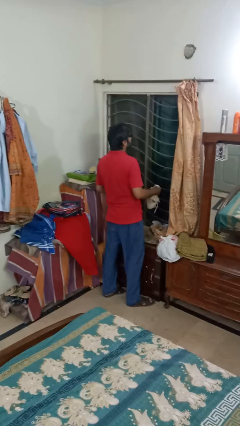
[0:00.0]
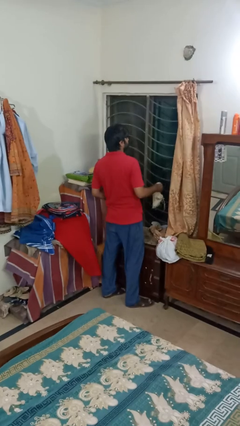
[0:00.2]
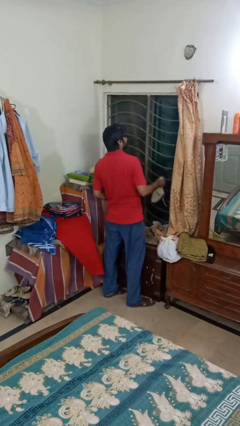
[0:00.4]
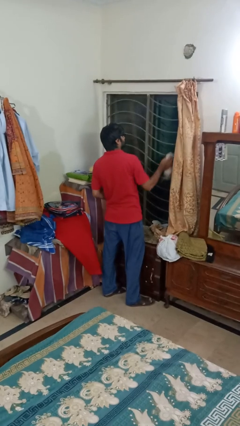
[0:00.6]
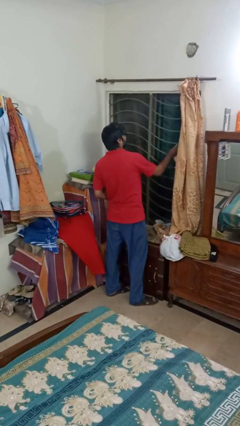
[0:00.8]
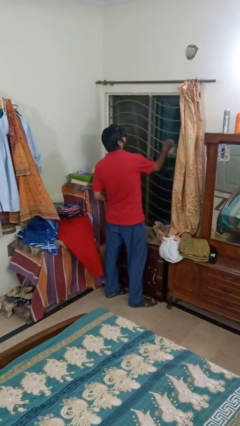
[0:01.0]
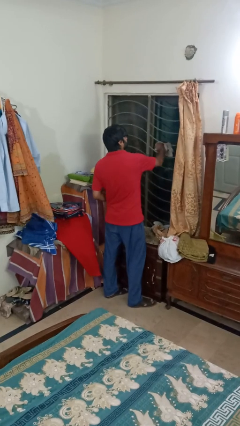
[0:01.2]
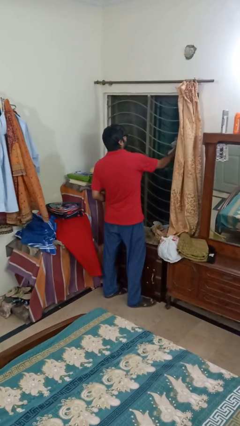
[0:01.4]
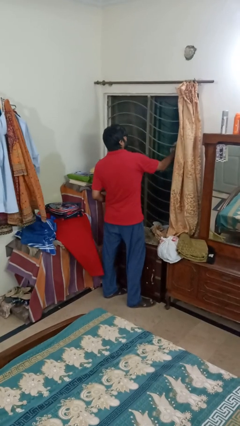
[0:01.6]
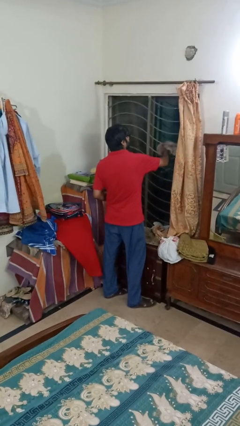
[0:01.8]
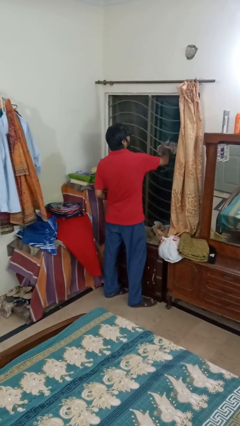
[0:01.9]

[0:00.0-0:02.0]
person washes window

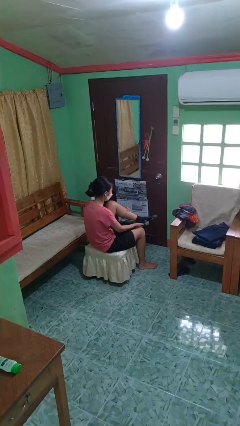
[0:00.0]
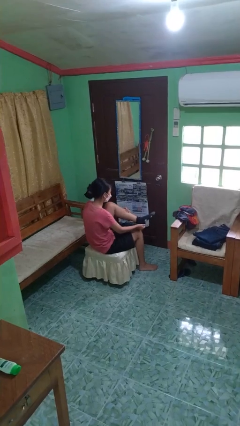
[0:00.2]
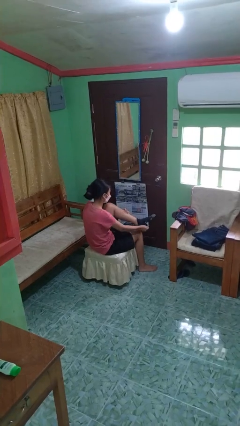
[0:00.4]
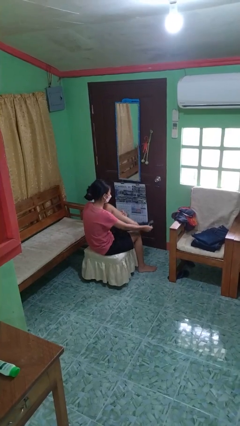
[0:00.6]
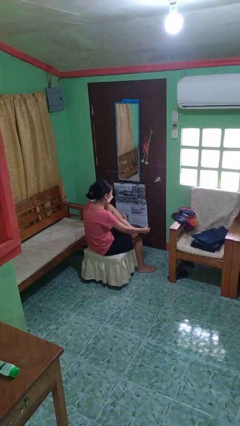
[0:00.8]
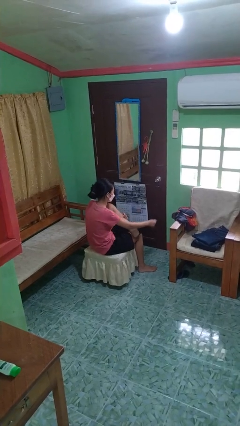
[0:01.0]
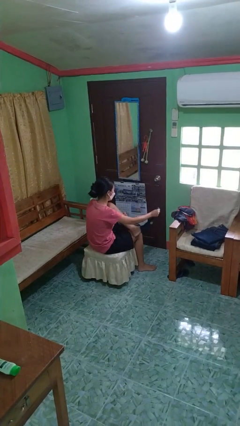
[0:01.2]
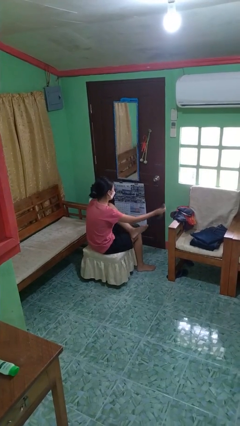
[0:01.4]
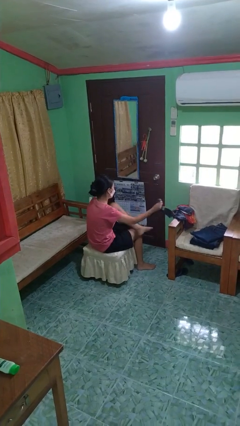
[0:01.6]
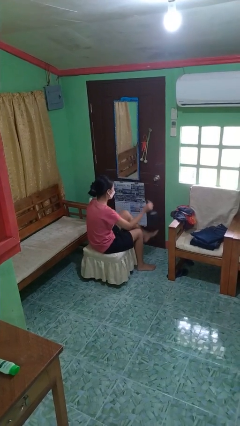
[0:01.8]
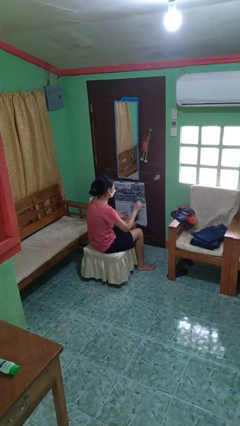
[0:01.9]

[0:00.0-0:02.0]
person takes off socks

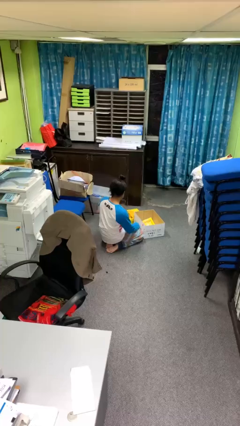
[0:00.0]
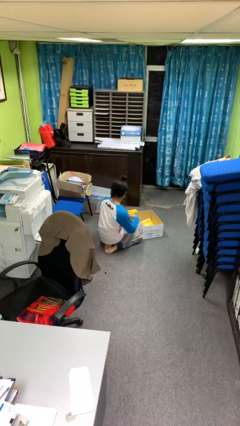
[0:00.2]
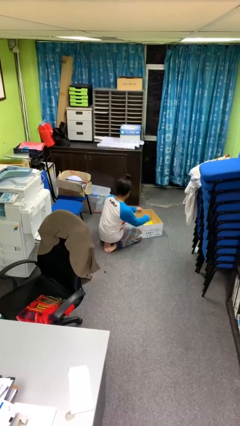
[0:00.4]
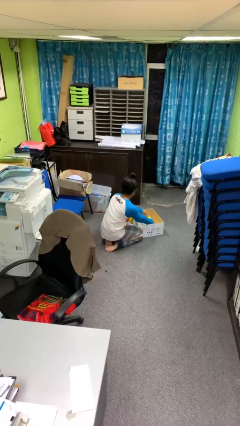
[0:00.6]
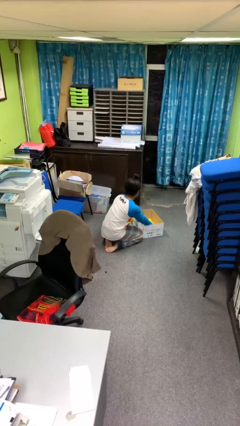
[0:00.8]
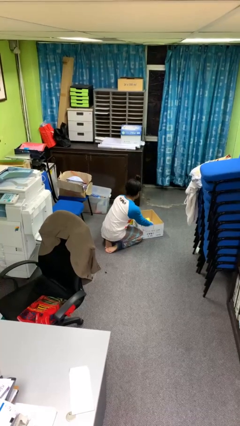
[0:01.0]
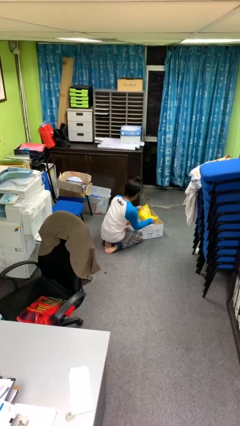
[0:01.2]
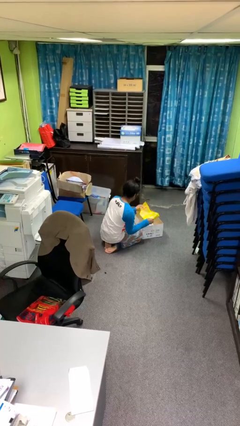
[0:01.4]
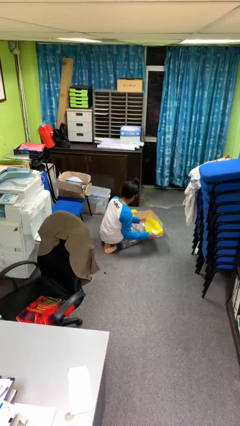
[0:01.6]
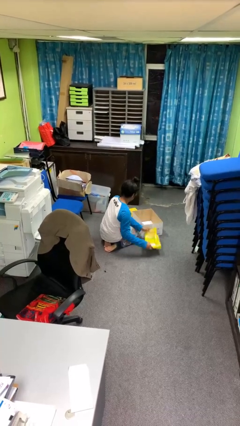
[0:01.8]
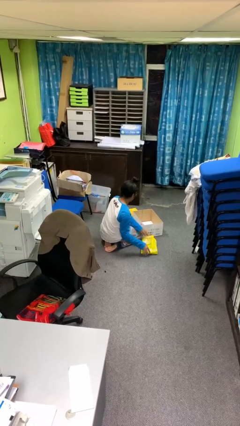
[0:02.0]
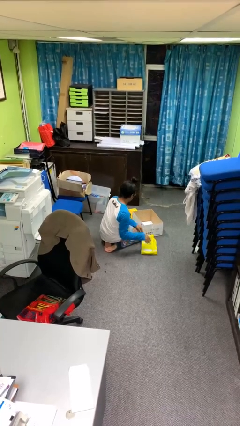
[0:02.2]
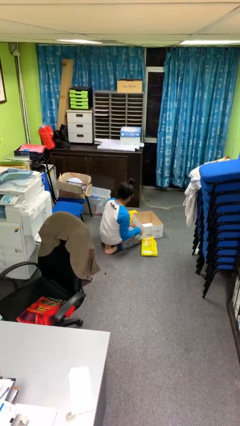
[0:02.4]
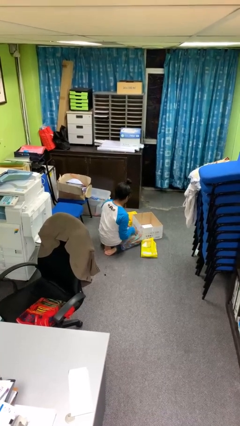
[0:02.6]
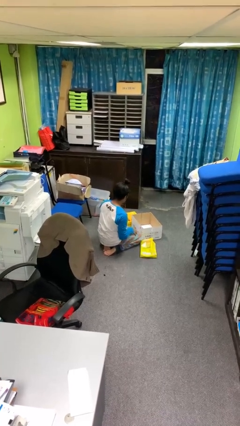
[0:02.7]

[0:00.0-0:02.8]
person takes object from box

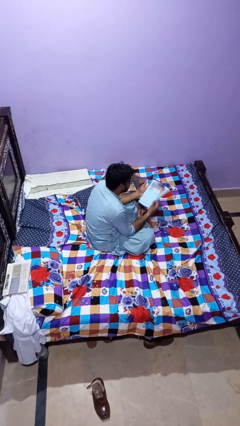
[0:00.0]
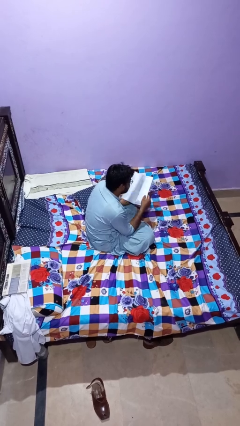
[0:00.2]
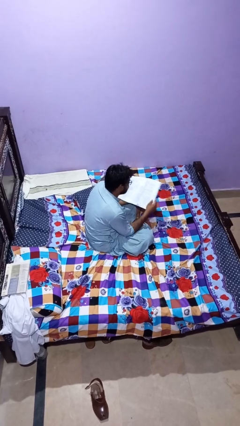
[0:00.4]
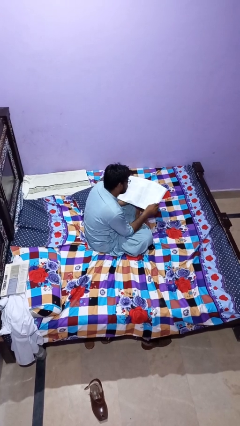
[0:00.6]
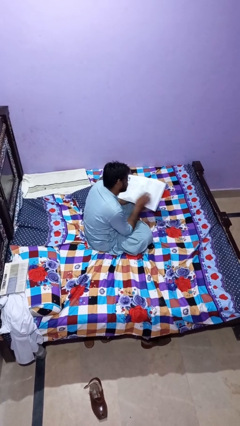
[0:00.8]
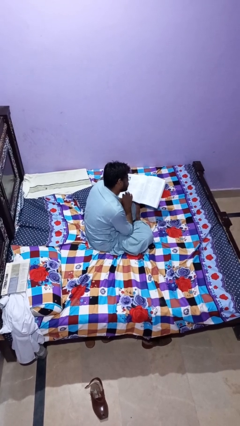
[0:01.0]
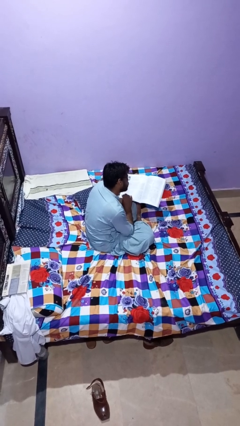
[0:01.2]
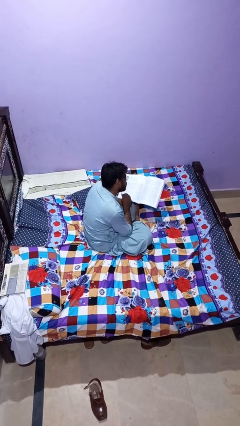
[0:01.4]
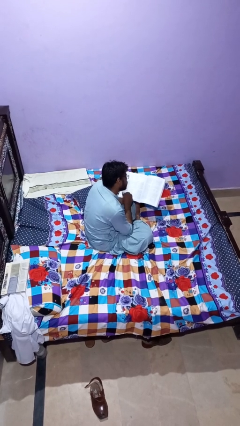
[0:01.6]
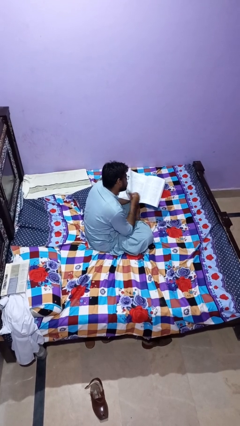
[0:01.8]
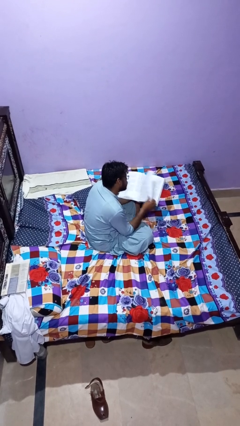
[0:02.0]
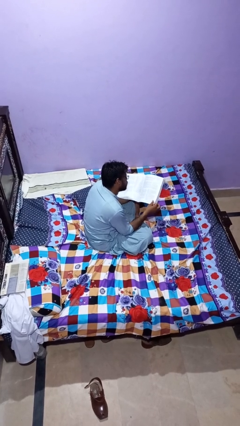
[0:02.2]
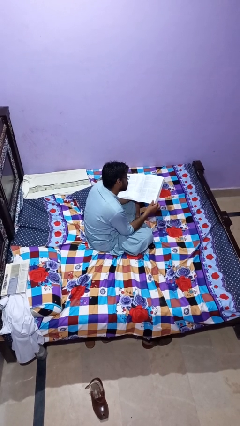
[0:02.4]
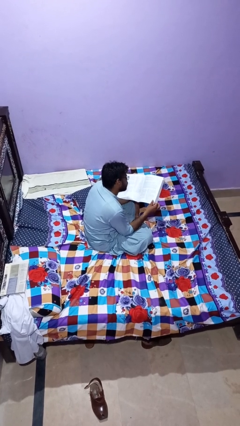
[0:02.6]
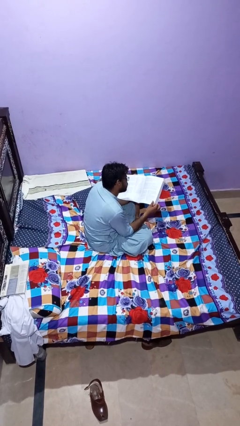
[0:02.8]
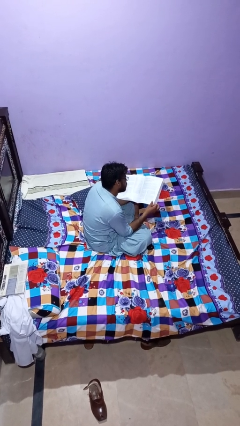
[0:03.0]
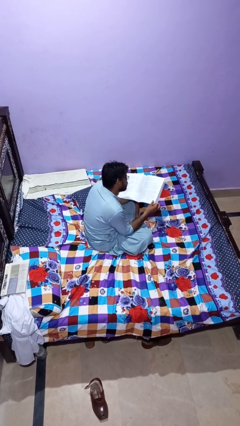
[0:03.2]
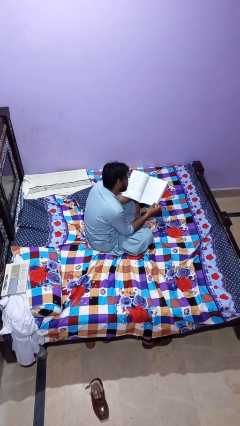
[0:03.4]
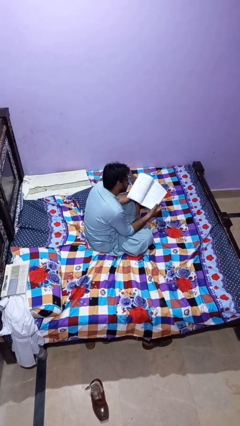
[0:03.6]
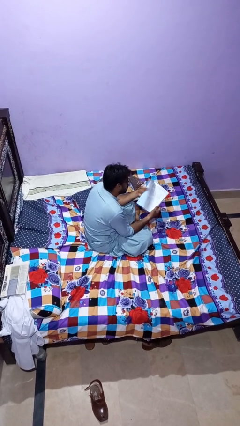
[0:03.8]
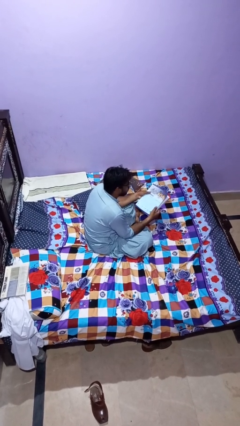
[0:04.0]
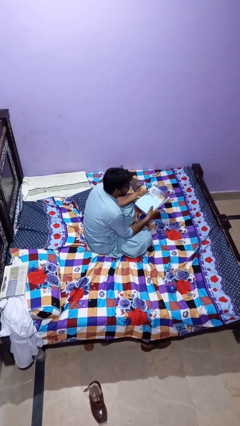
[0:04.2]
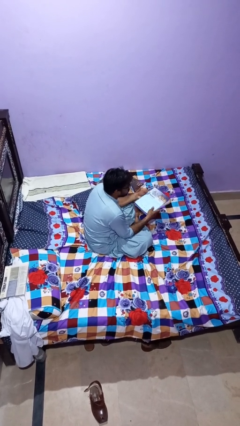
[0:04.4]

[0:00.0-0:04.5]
person reads magazine

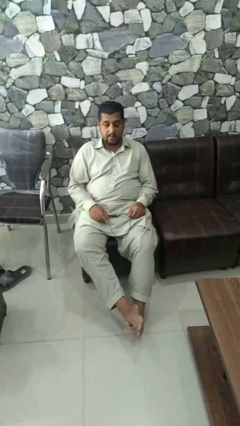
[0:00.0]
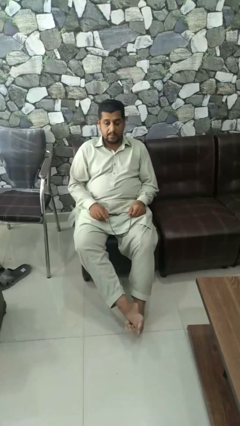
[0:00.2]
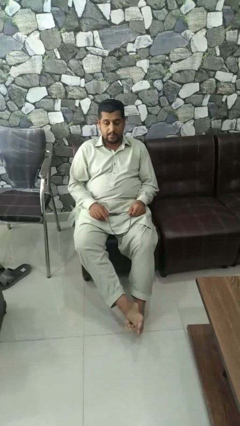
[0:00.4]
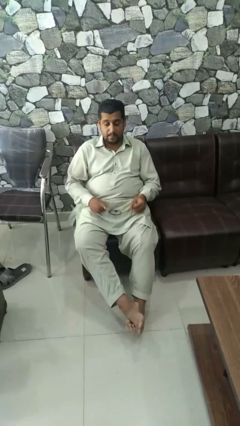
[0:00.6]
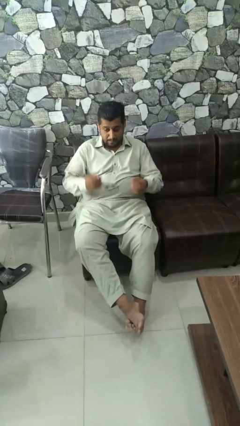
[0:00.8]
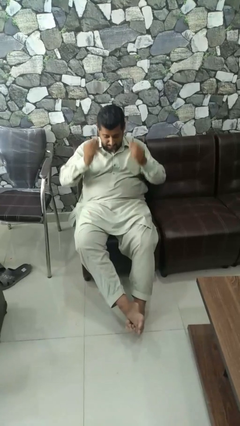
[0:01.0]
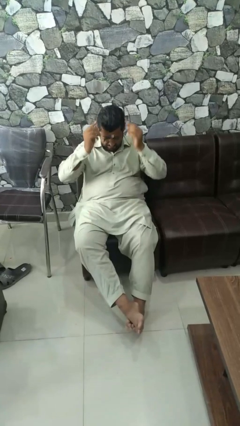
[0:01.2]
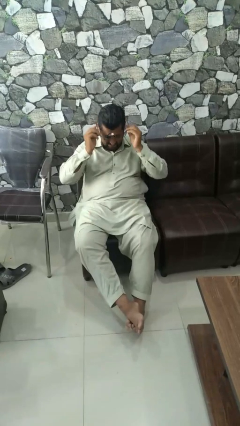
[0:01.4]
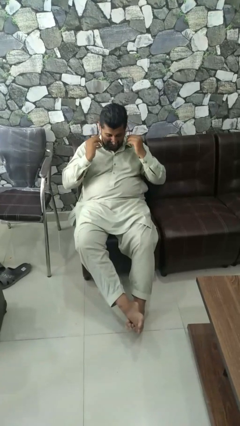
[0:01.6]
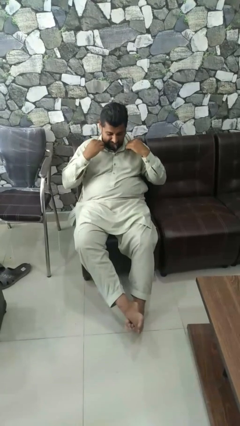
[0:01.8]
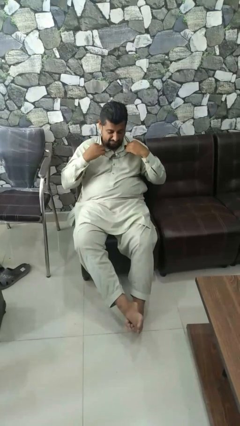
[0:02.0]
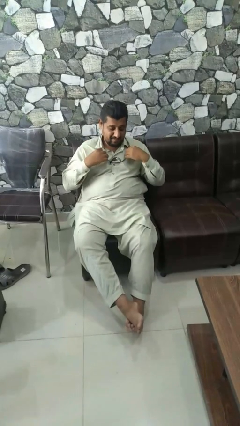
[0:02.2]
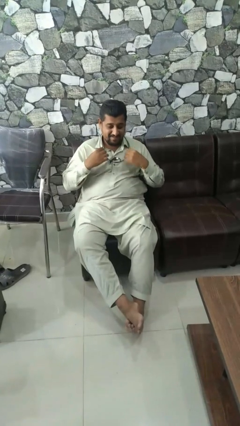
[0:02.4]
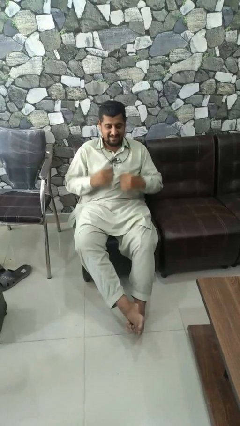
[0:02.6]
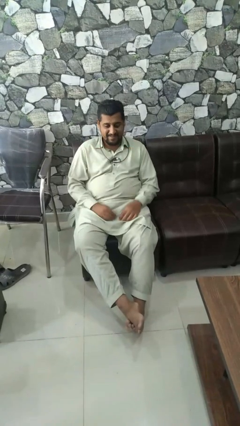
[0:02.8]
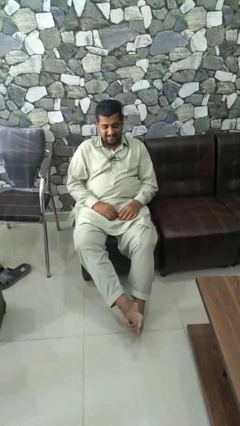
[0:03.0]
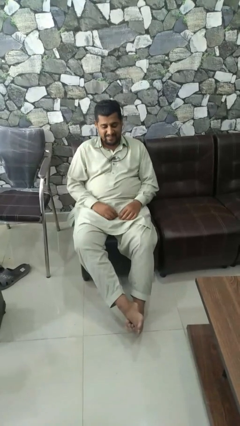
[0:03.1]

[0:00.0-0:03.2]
person puts on necklace

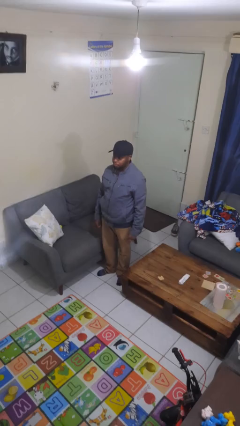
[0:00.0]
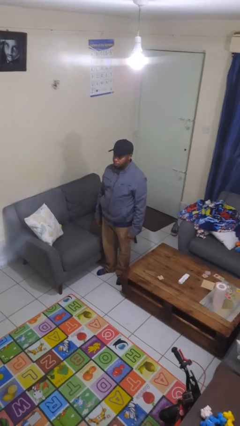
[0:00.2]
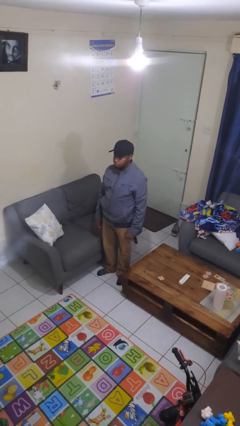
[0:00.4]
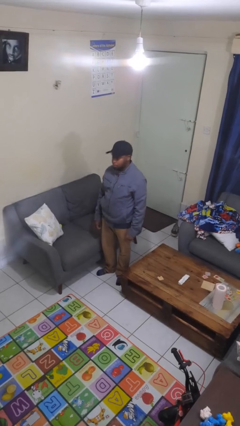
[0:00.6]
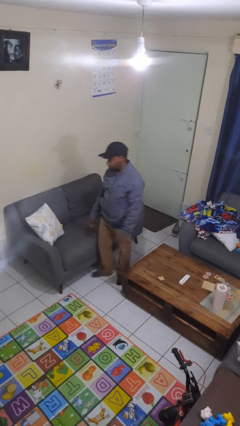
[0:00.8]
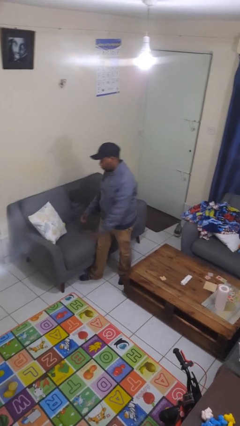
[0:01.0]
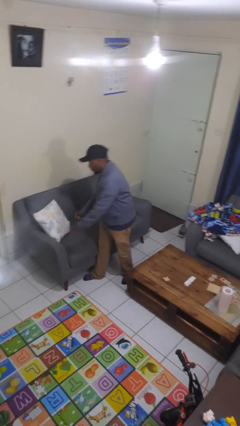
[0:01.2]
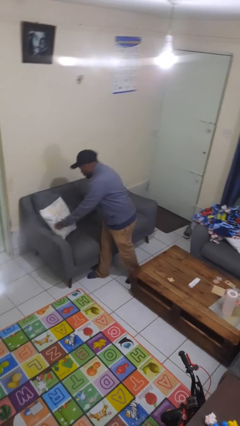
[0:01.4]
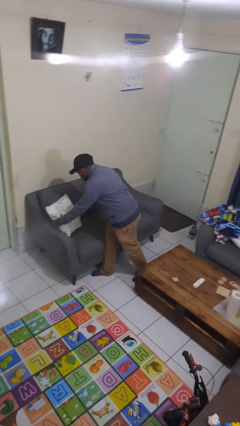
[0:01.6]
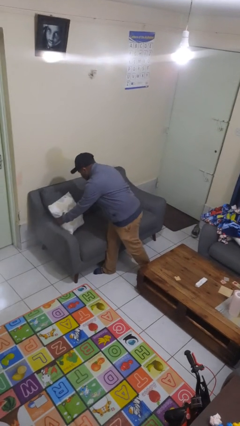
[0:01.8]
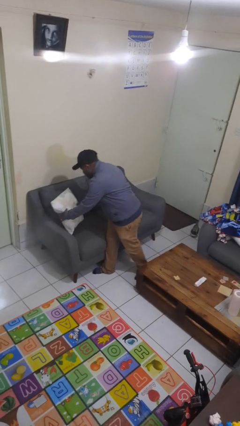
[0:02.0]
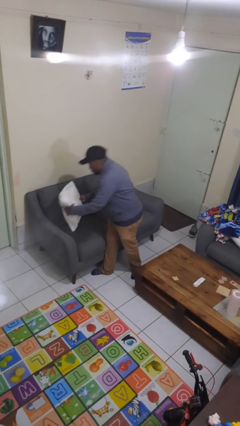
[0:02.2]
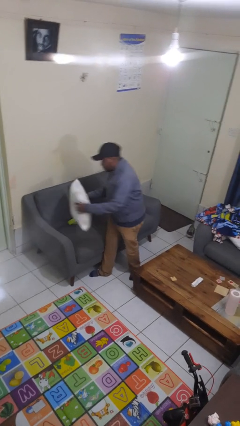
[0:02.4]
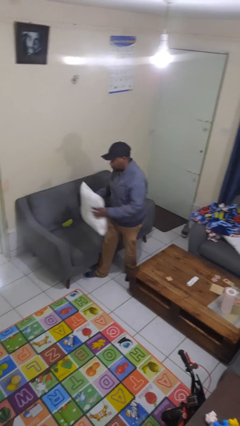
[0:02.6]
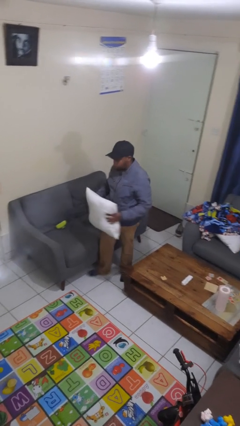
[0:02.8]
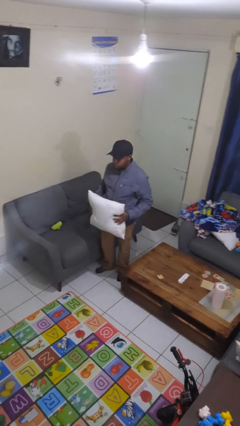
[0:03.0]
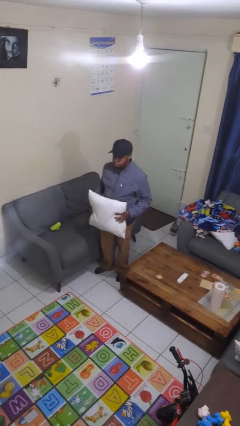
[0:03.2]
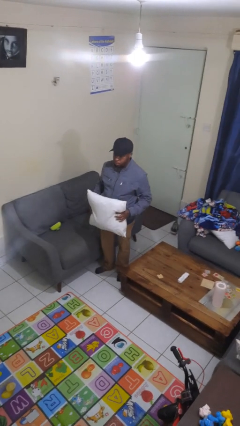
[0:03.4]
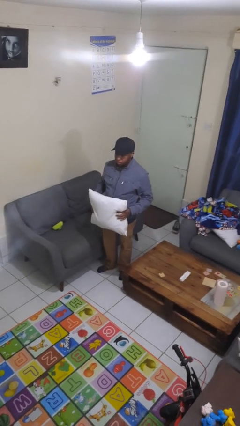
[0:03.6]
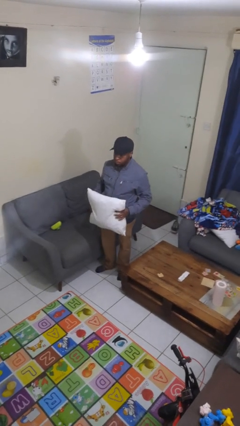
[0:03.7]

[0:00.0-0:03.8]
person picks up object from couch
